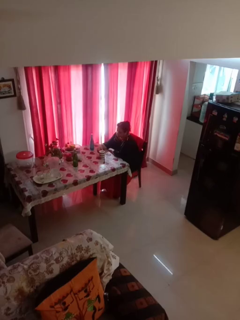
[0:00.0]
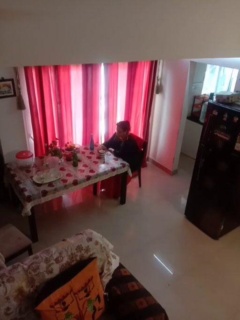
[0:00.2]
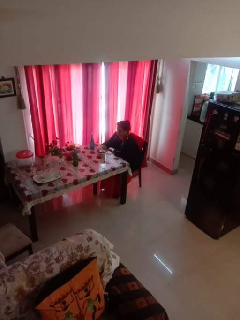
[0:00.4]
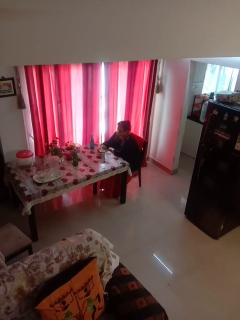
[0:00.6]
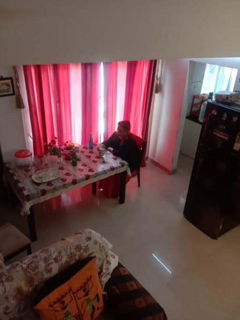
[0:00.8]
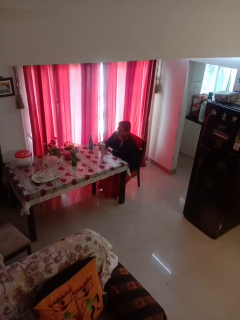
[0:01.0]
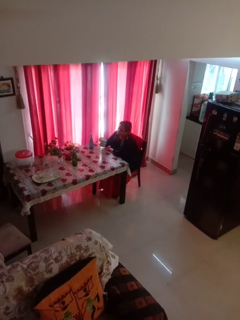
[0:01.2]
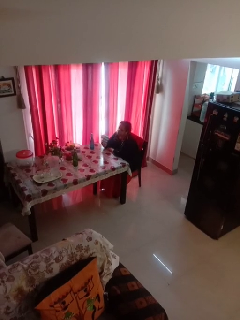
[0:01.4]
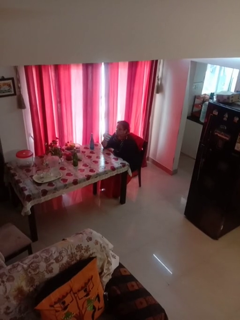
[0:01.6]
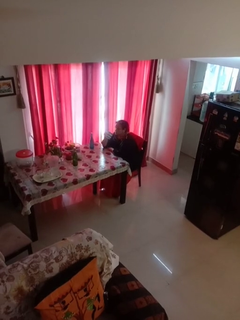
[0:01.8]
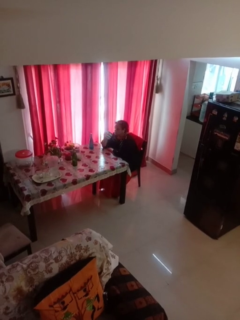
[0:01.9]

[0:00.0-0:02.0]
person picks up object from table

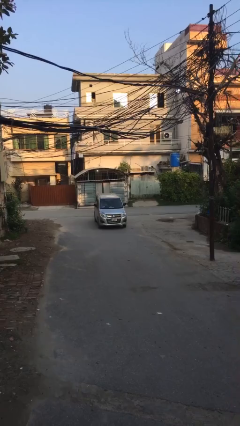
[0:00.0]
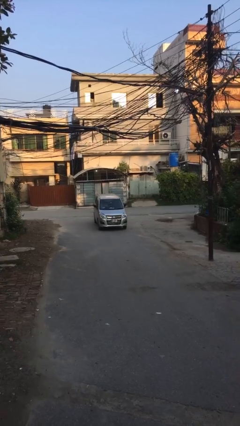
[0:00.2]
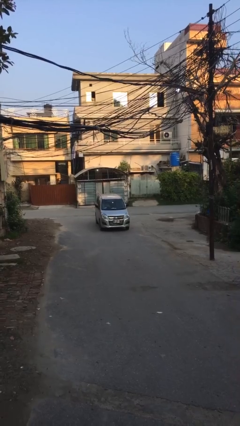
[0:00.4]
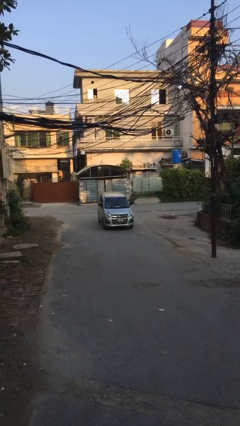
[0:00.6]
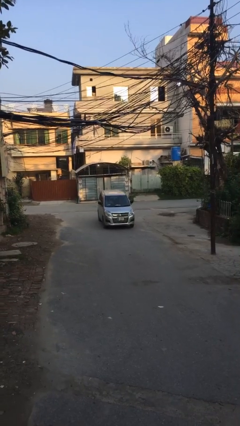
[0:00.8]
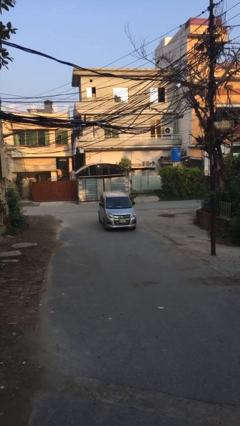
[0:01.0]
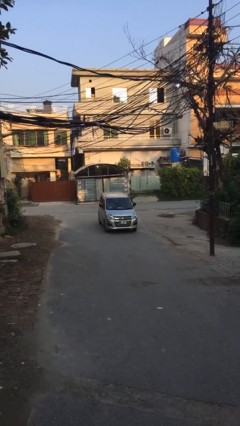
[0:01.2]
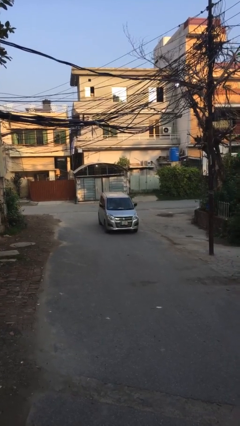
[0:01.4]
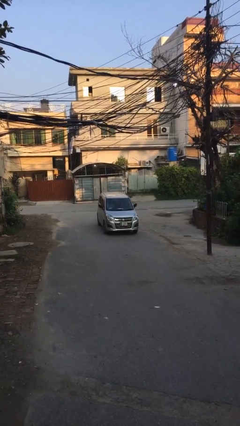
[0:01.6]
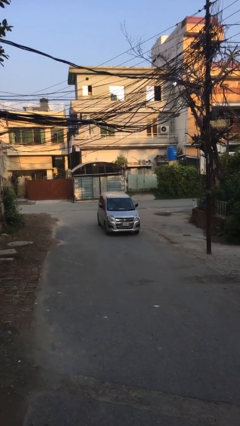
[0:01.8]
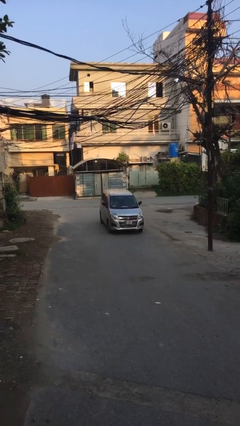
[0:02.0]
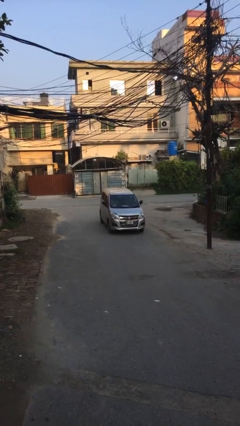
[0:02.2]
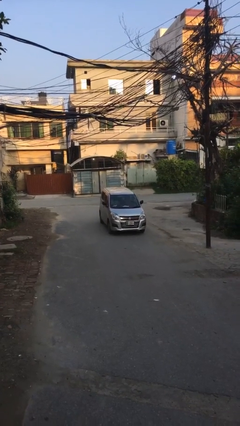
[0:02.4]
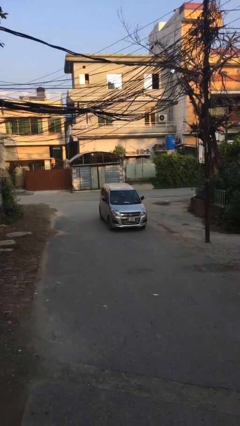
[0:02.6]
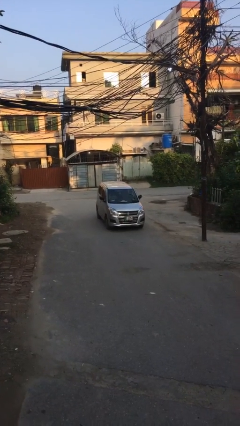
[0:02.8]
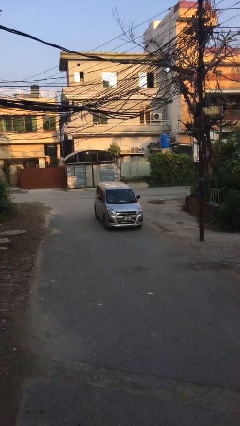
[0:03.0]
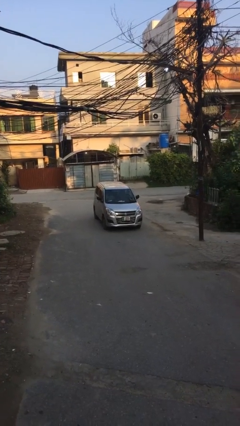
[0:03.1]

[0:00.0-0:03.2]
car drops off person

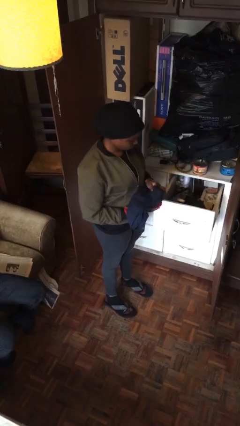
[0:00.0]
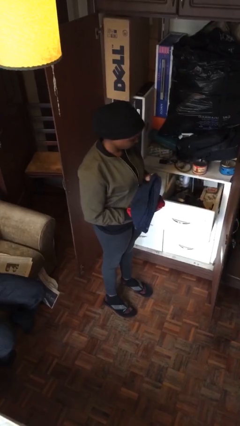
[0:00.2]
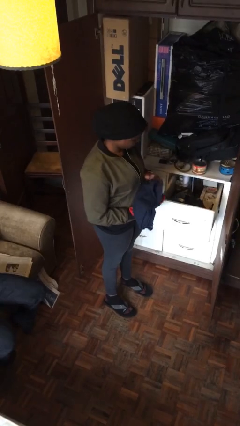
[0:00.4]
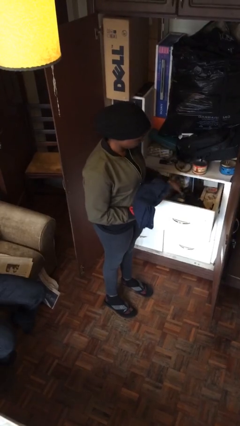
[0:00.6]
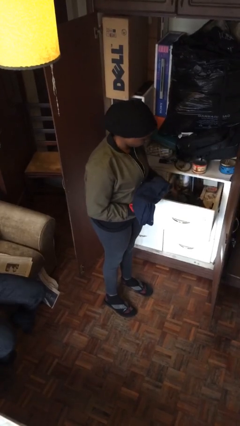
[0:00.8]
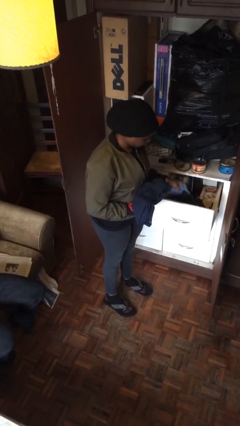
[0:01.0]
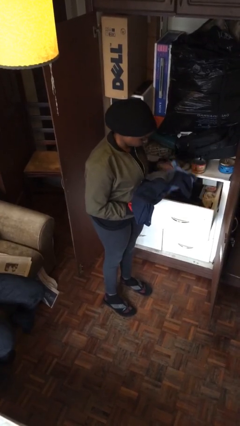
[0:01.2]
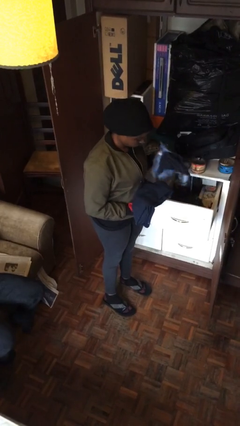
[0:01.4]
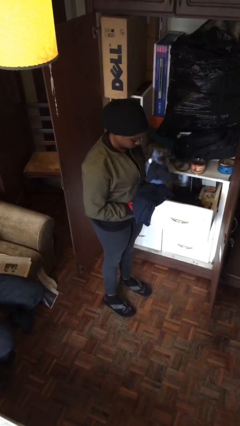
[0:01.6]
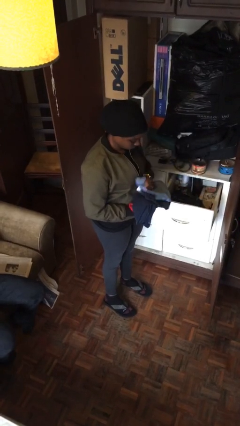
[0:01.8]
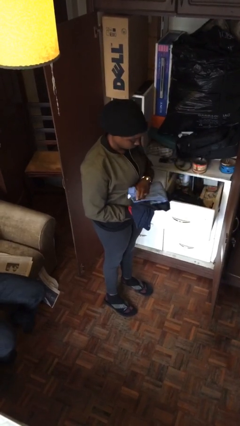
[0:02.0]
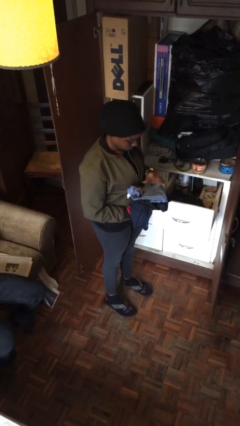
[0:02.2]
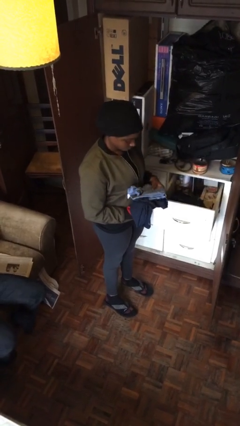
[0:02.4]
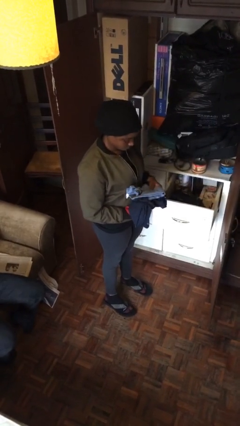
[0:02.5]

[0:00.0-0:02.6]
person takes clothes from dresser

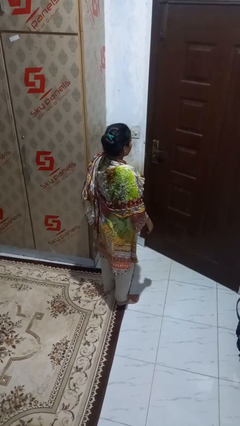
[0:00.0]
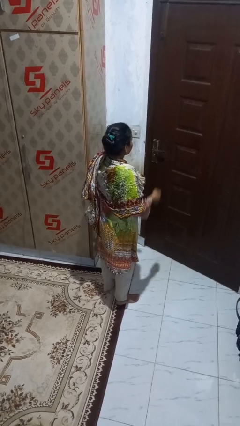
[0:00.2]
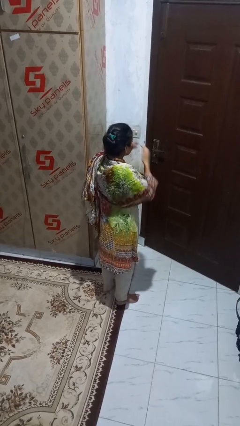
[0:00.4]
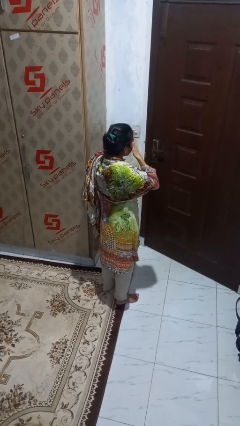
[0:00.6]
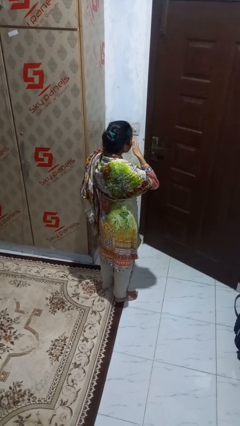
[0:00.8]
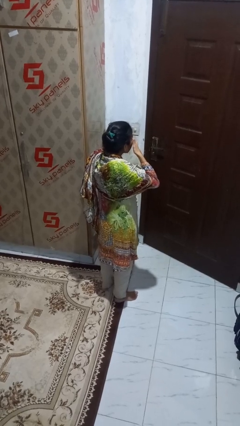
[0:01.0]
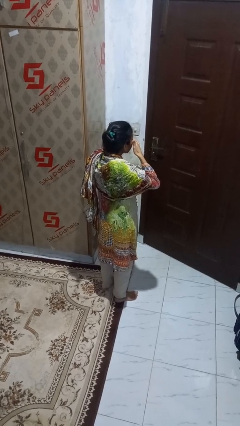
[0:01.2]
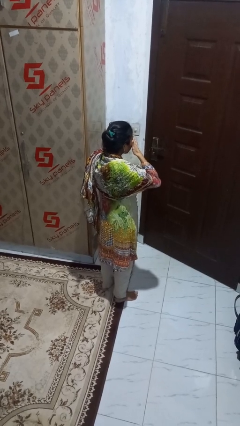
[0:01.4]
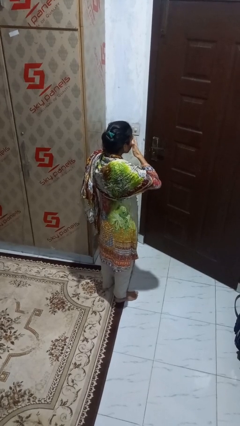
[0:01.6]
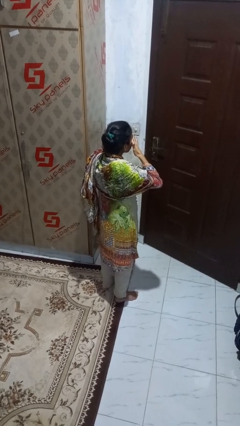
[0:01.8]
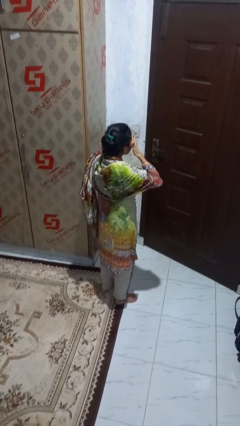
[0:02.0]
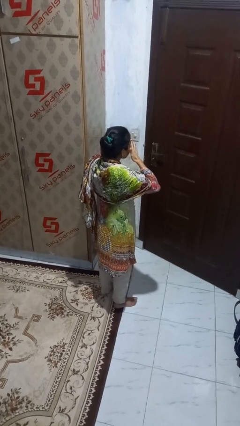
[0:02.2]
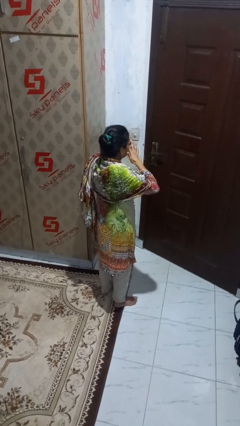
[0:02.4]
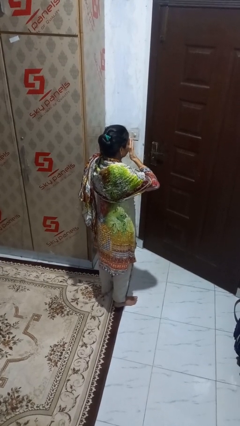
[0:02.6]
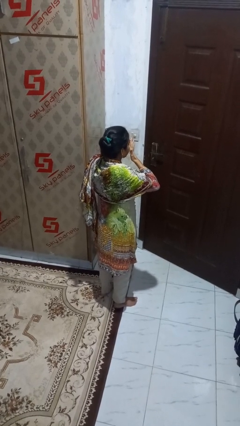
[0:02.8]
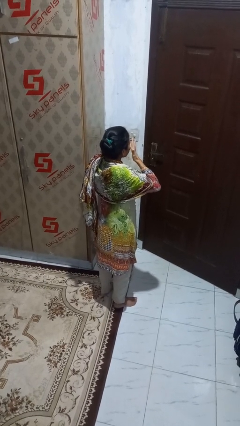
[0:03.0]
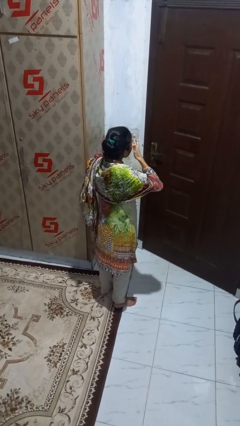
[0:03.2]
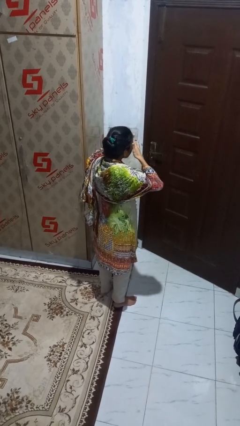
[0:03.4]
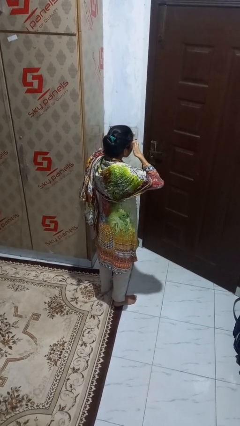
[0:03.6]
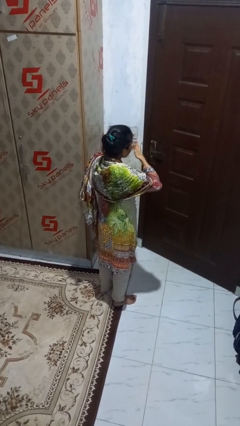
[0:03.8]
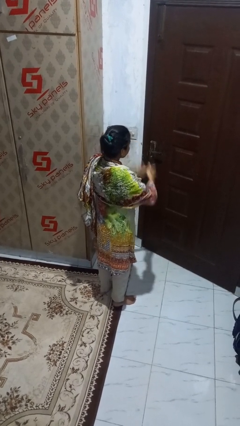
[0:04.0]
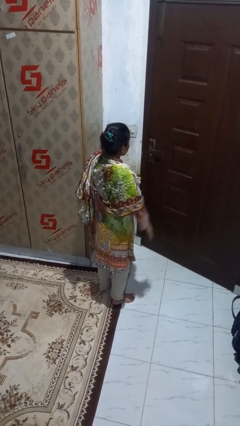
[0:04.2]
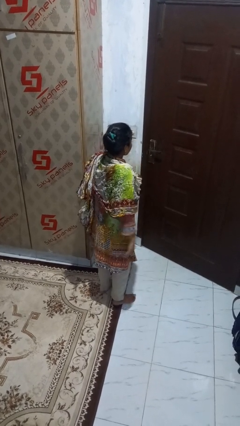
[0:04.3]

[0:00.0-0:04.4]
person rubs eyes

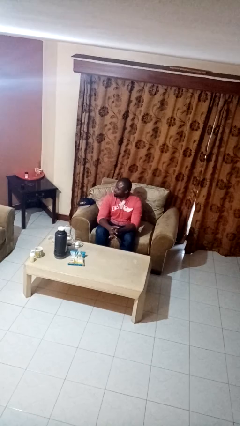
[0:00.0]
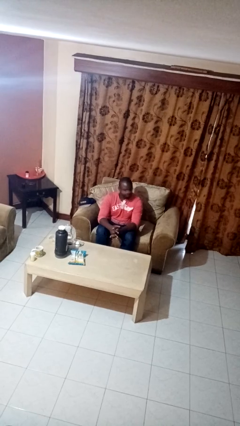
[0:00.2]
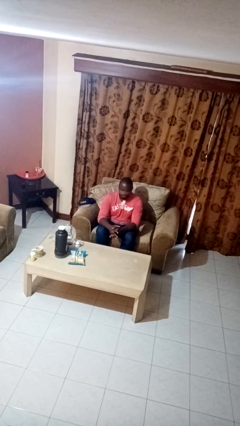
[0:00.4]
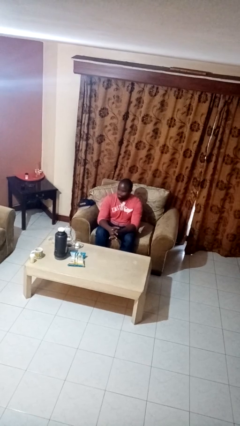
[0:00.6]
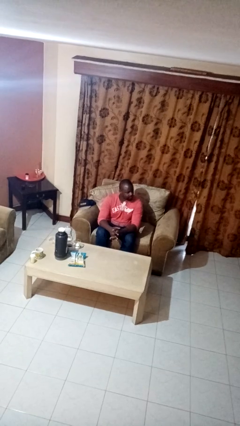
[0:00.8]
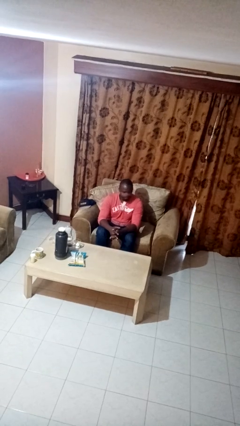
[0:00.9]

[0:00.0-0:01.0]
person shakes head

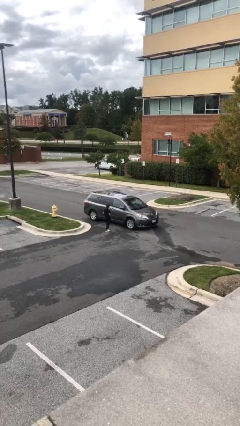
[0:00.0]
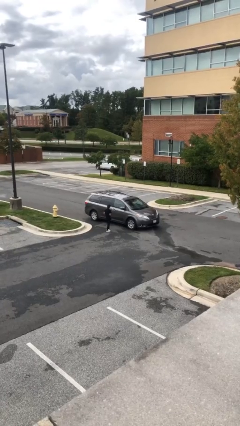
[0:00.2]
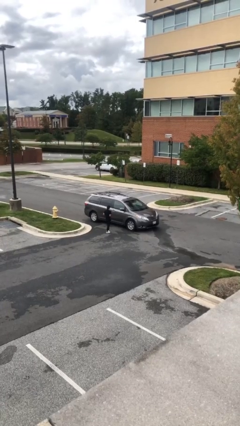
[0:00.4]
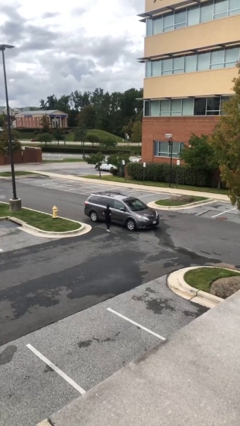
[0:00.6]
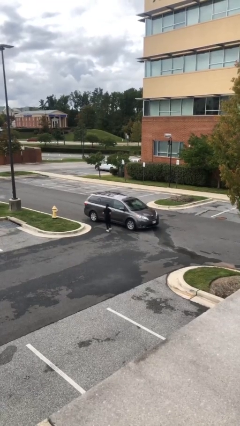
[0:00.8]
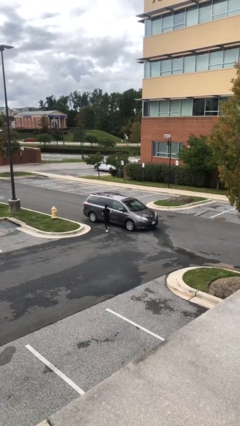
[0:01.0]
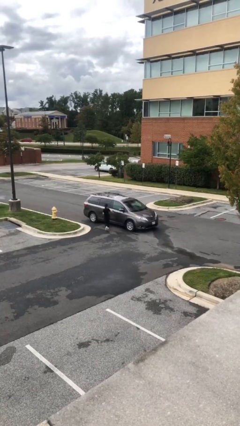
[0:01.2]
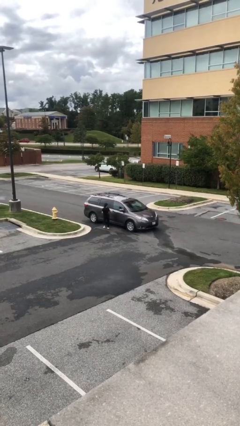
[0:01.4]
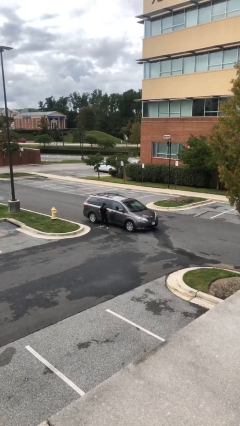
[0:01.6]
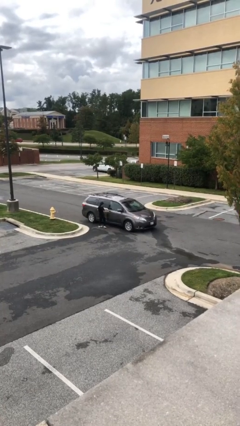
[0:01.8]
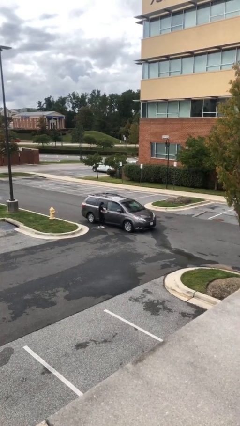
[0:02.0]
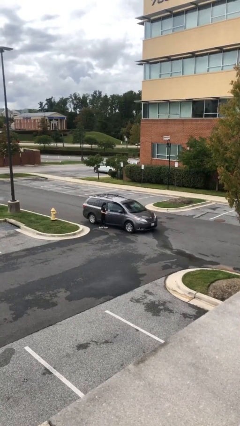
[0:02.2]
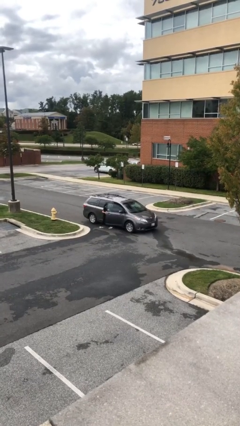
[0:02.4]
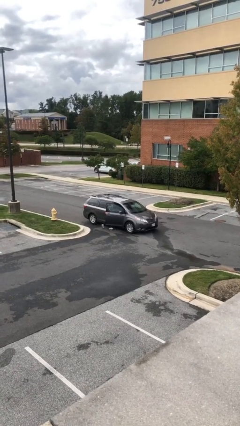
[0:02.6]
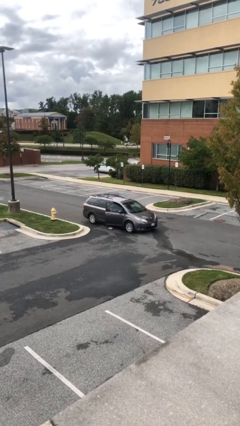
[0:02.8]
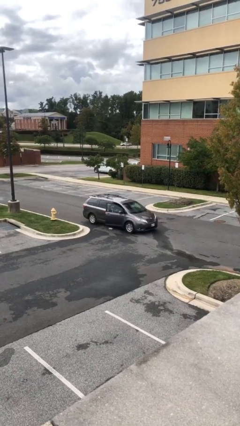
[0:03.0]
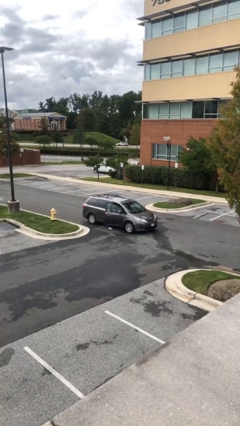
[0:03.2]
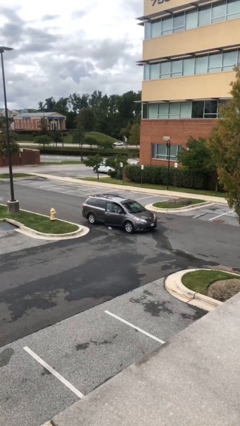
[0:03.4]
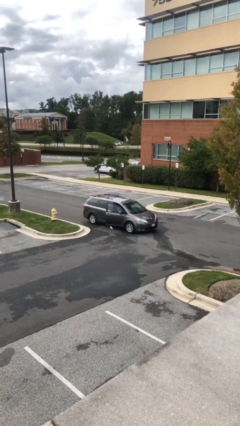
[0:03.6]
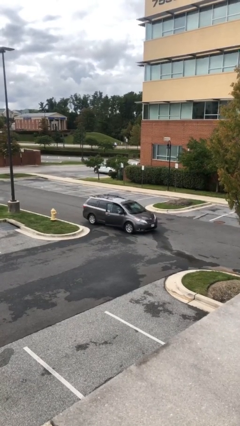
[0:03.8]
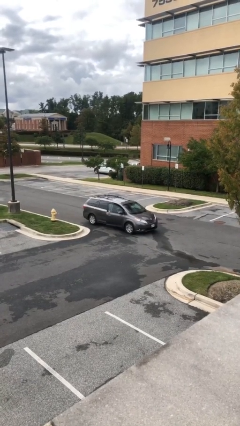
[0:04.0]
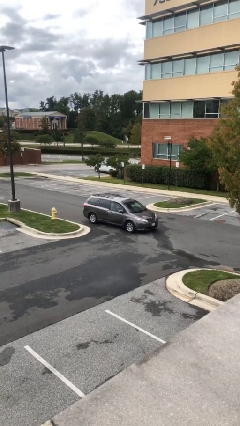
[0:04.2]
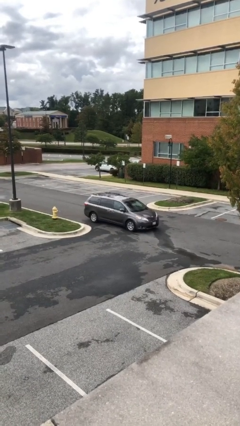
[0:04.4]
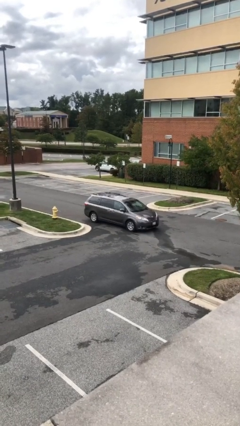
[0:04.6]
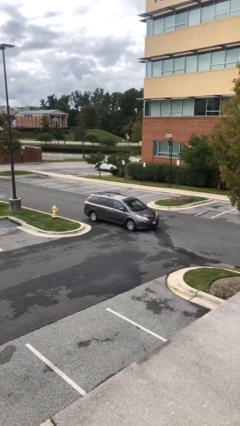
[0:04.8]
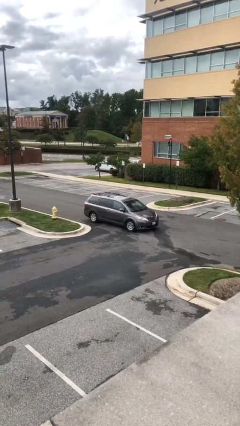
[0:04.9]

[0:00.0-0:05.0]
car picks up person
